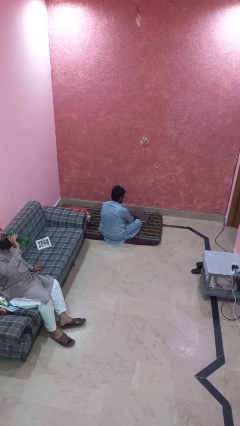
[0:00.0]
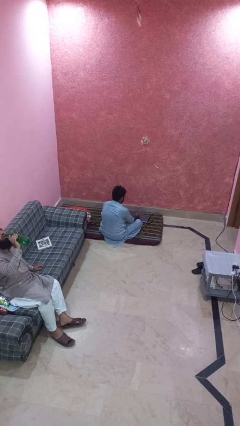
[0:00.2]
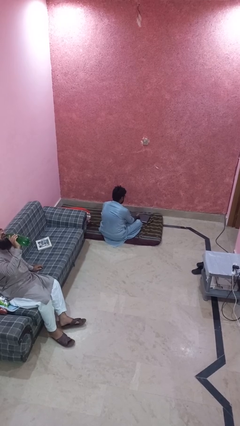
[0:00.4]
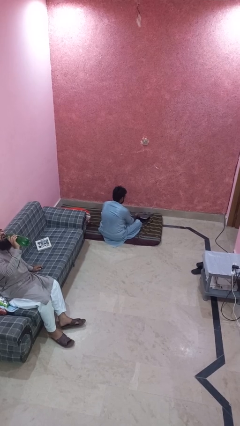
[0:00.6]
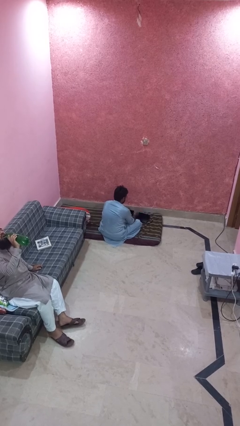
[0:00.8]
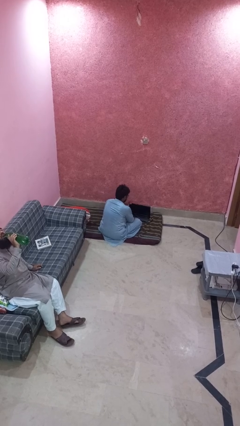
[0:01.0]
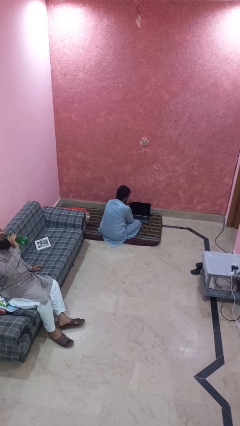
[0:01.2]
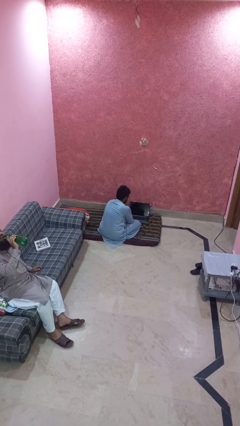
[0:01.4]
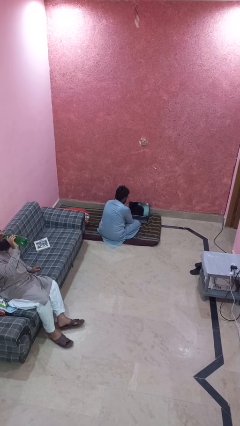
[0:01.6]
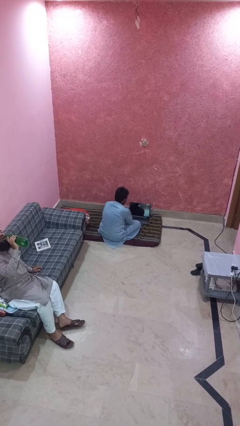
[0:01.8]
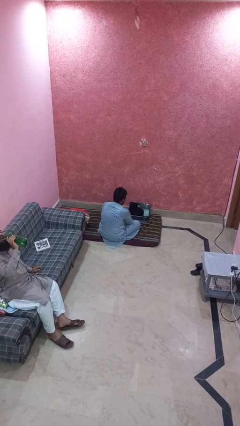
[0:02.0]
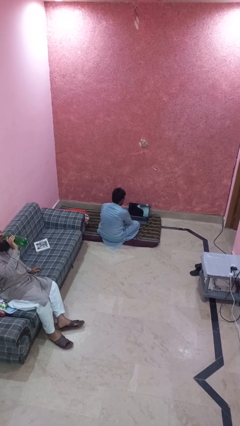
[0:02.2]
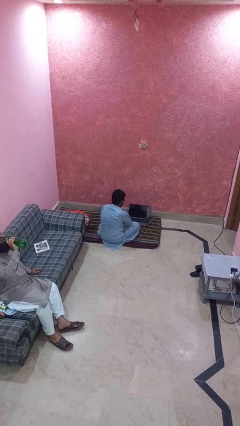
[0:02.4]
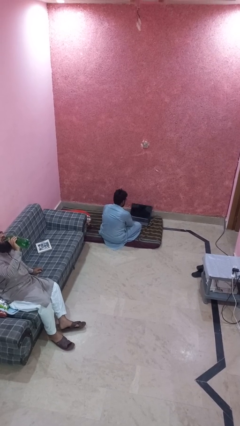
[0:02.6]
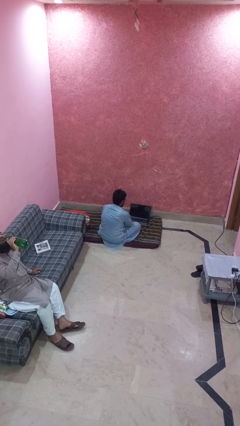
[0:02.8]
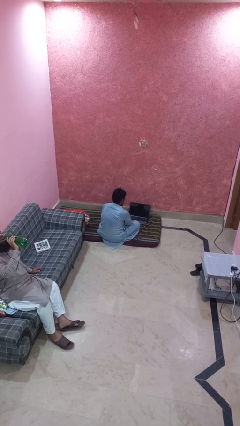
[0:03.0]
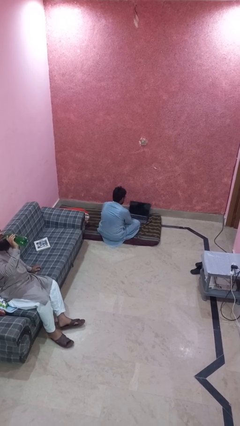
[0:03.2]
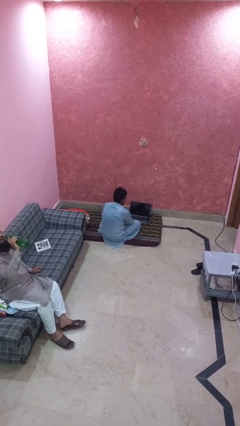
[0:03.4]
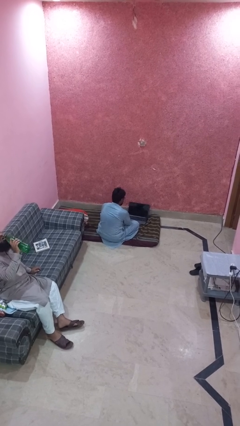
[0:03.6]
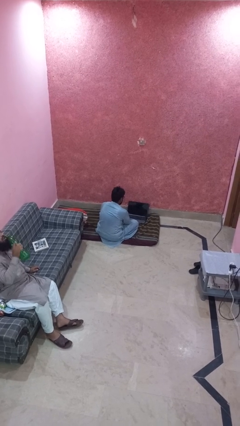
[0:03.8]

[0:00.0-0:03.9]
person opens laptop

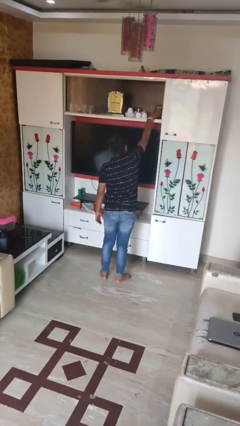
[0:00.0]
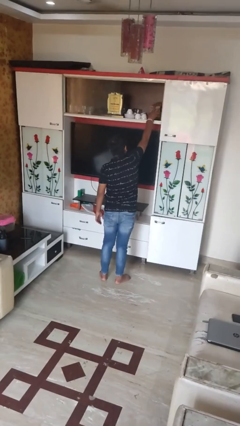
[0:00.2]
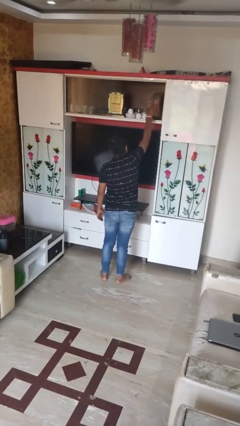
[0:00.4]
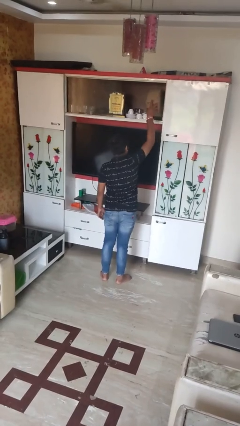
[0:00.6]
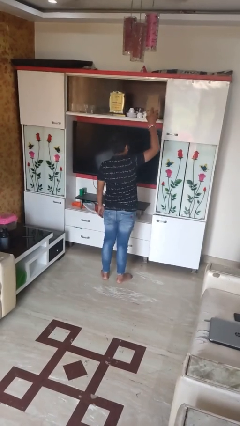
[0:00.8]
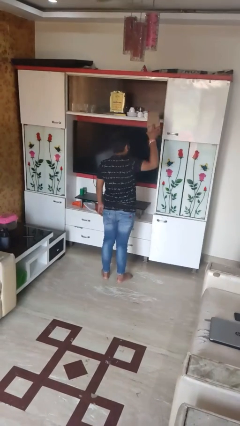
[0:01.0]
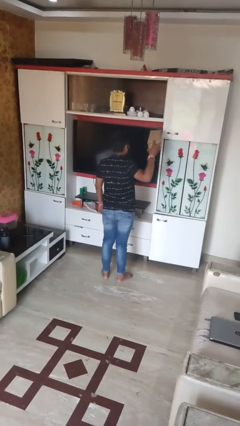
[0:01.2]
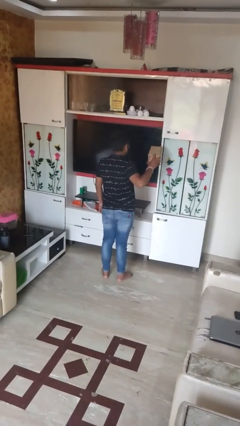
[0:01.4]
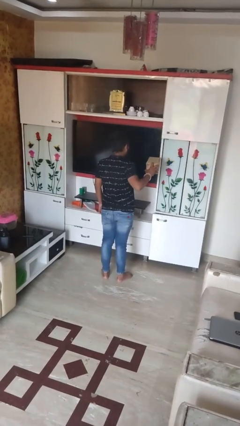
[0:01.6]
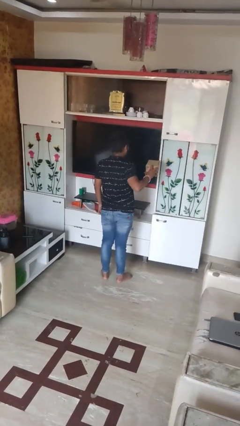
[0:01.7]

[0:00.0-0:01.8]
person picks up object from shelf

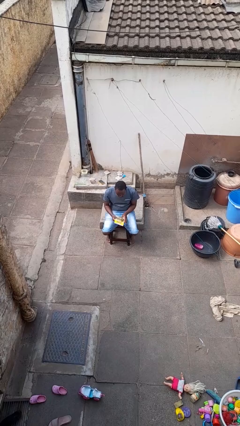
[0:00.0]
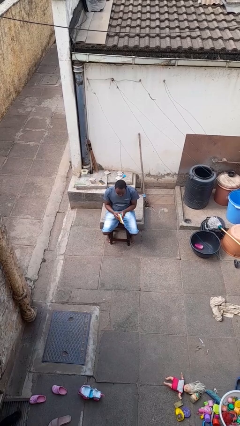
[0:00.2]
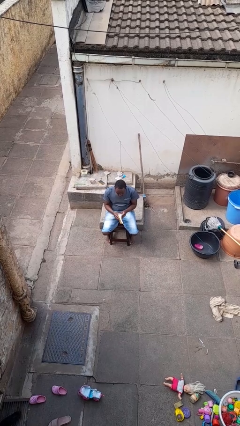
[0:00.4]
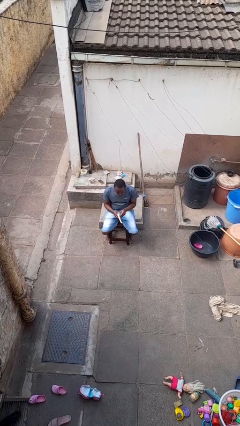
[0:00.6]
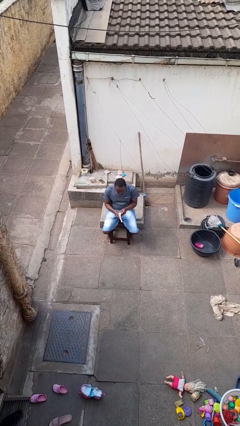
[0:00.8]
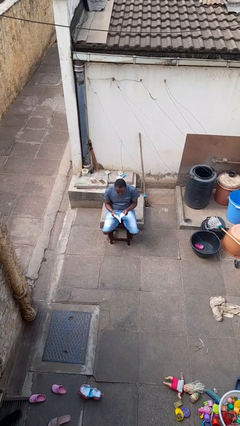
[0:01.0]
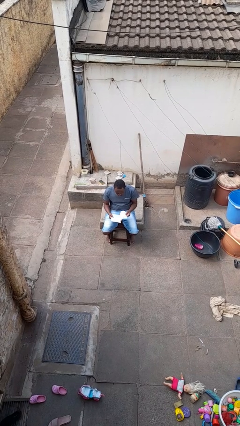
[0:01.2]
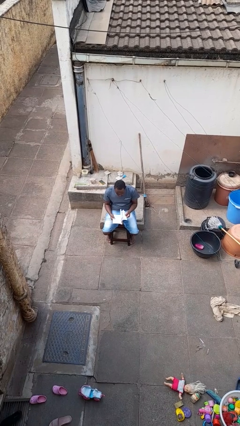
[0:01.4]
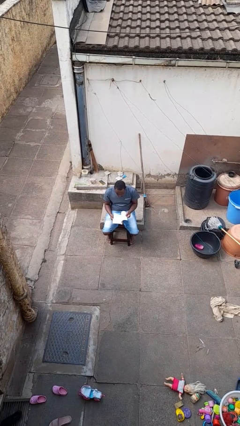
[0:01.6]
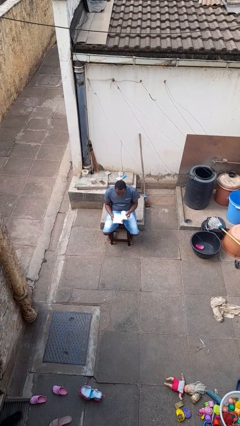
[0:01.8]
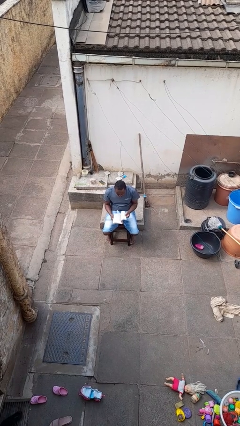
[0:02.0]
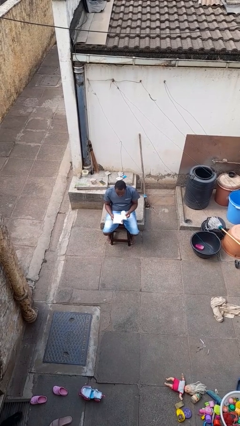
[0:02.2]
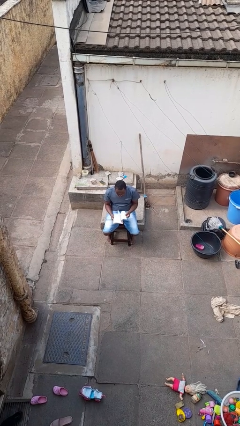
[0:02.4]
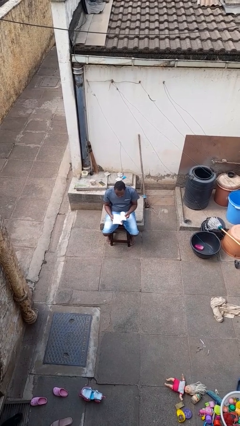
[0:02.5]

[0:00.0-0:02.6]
person reads book

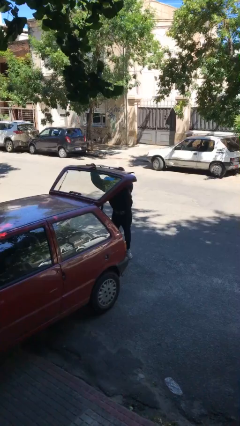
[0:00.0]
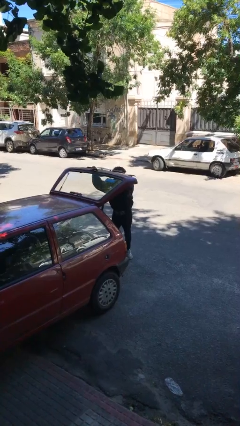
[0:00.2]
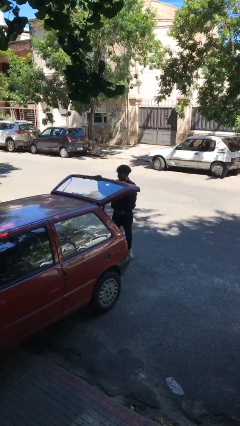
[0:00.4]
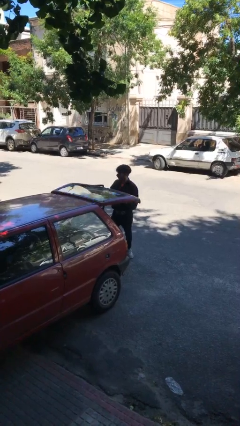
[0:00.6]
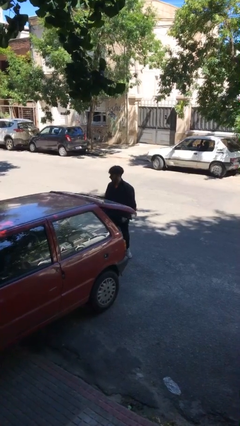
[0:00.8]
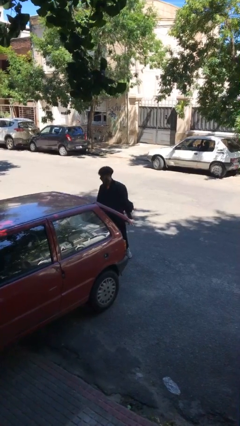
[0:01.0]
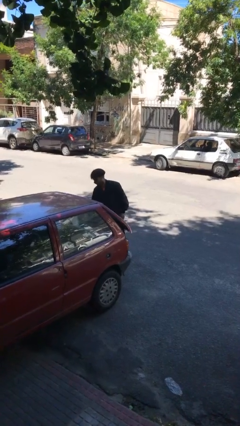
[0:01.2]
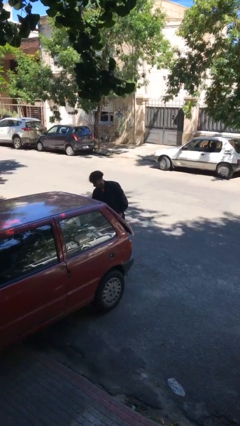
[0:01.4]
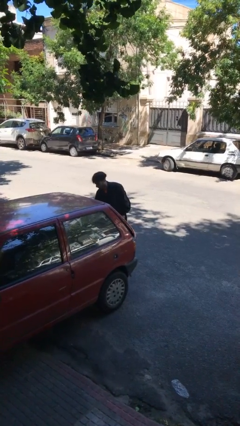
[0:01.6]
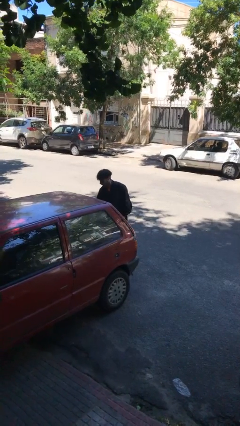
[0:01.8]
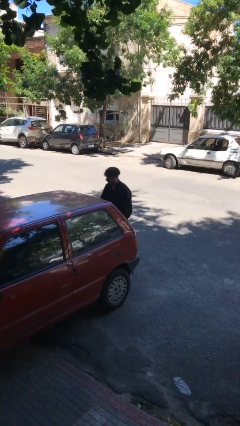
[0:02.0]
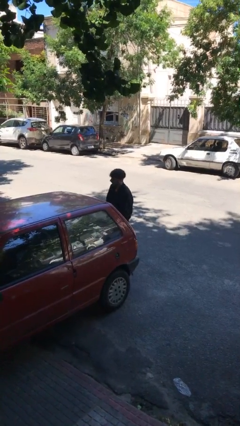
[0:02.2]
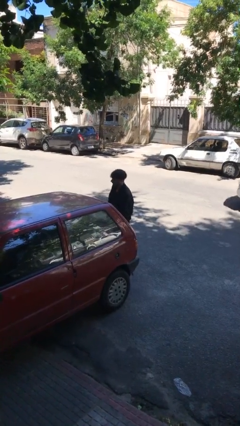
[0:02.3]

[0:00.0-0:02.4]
person closes car trunk

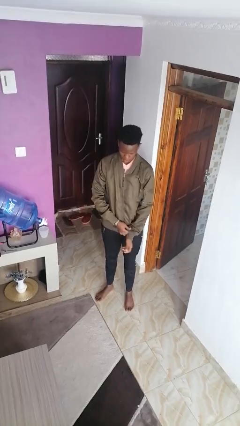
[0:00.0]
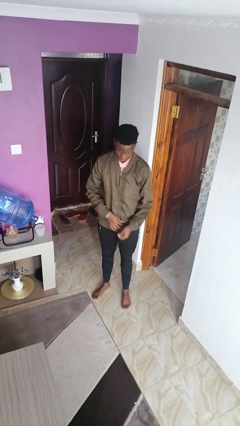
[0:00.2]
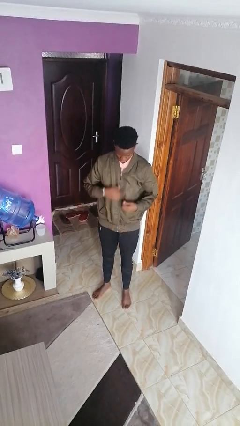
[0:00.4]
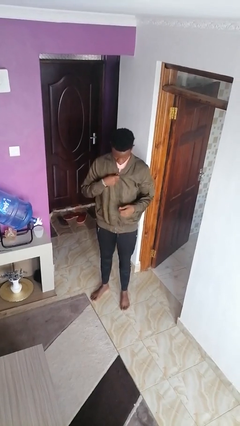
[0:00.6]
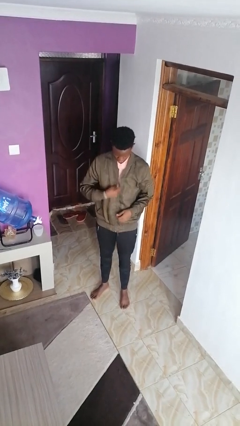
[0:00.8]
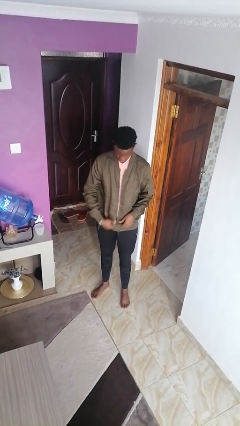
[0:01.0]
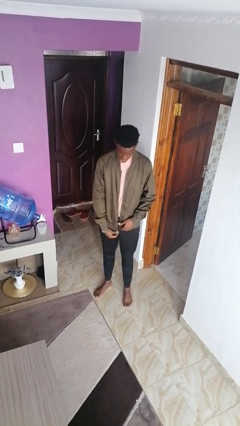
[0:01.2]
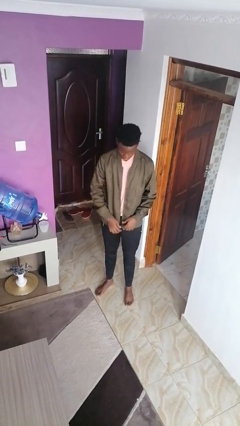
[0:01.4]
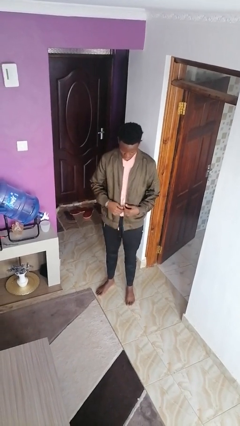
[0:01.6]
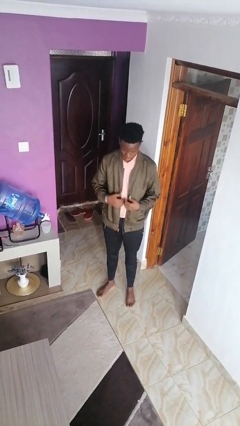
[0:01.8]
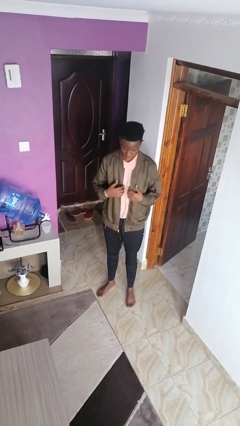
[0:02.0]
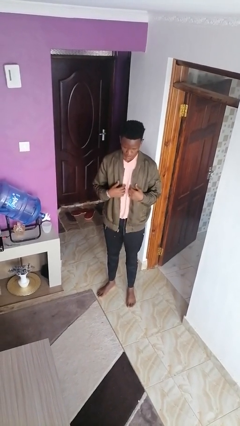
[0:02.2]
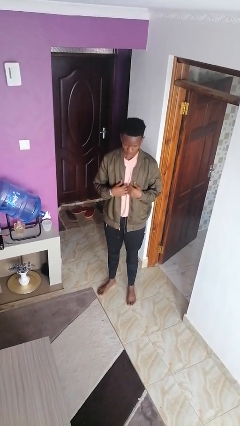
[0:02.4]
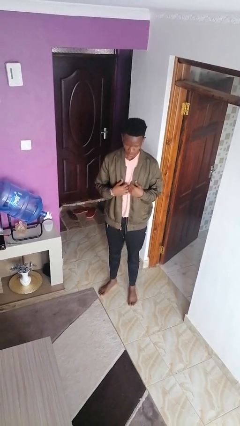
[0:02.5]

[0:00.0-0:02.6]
person unzips jacket

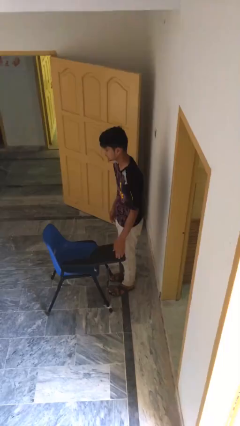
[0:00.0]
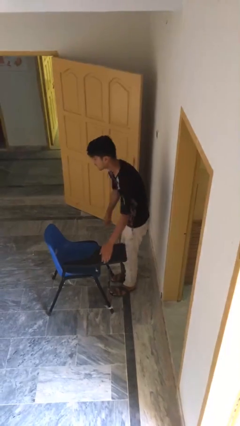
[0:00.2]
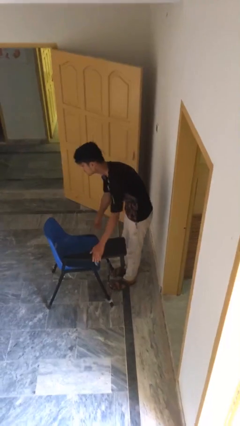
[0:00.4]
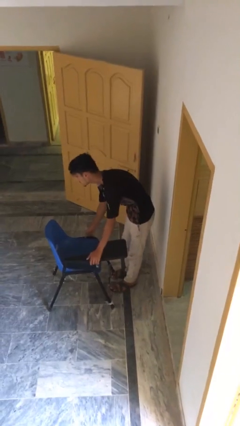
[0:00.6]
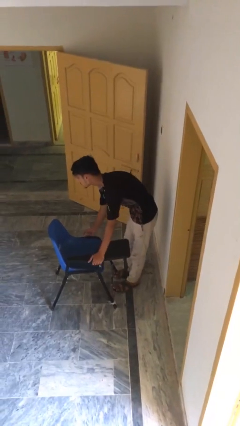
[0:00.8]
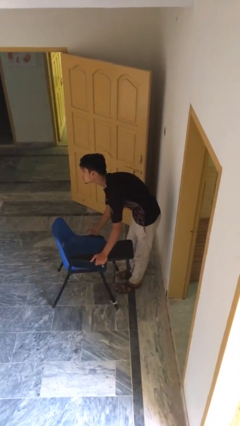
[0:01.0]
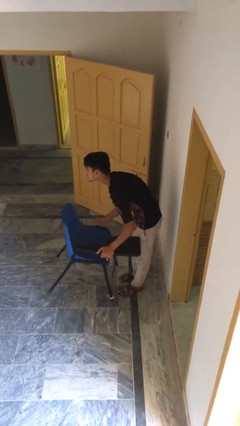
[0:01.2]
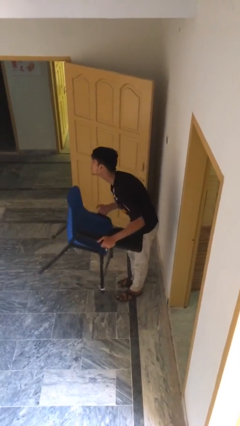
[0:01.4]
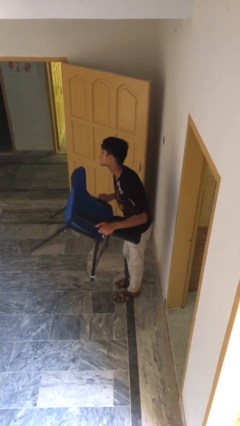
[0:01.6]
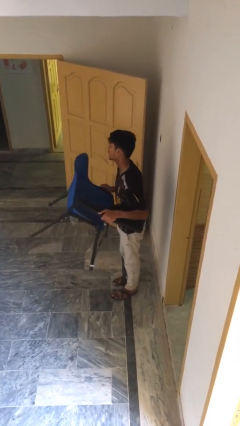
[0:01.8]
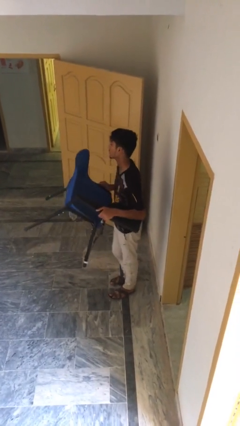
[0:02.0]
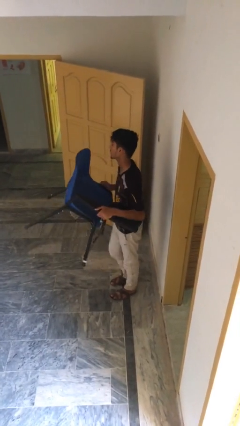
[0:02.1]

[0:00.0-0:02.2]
person picks up object from floor

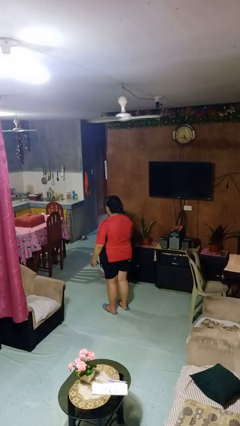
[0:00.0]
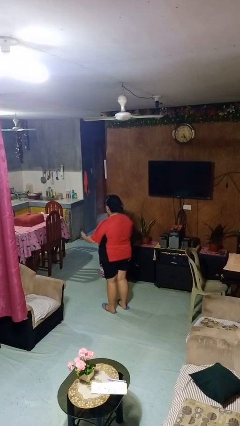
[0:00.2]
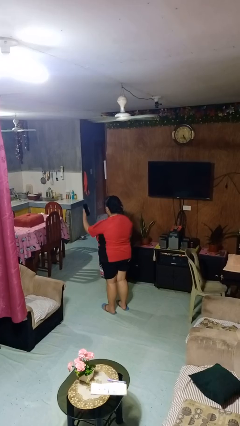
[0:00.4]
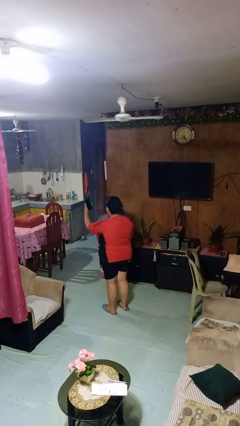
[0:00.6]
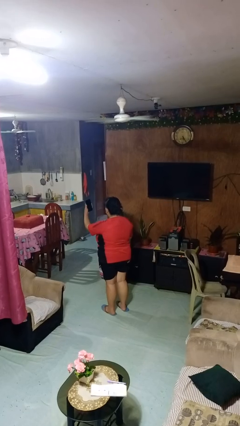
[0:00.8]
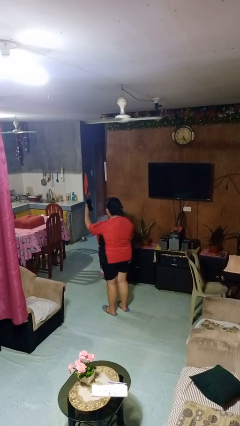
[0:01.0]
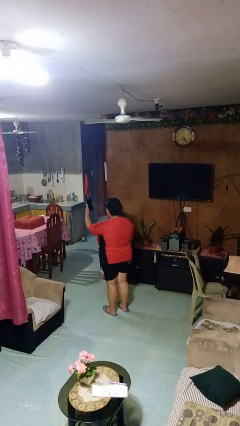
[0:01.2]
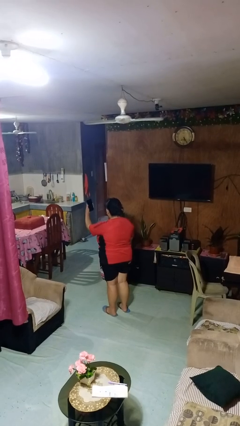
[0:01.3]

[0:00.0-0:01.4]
person takes selfie

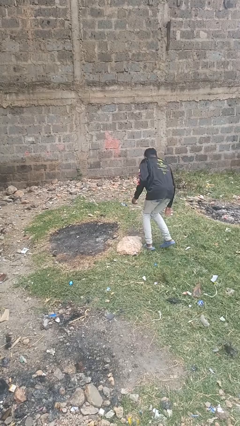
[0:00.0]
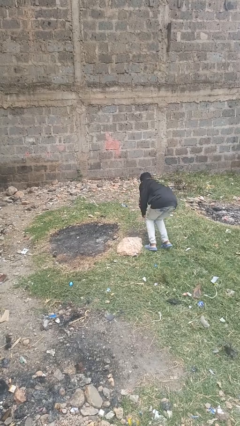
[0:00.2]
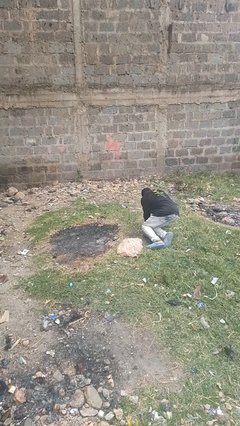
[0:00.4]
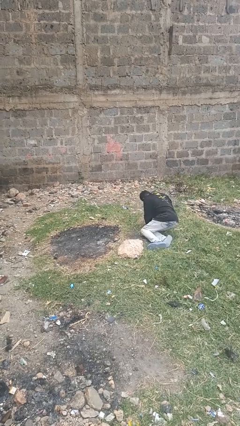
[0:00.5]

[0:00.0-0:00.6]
person trips on object on floor
